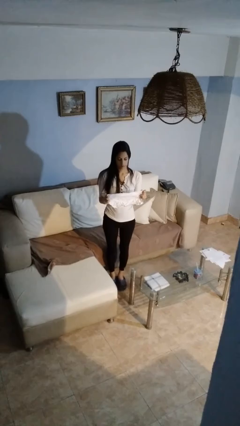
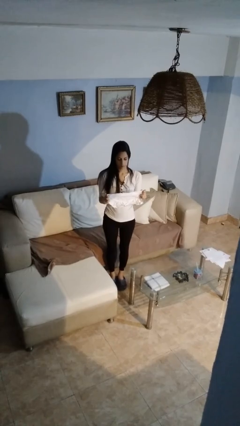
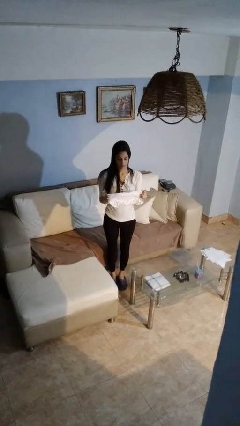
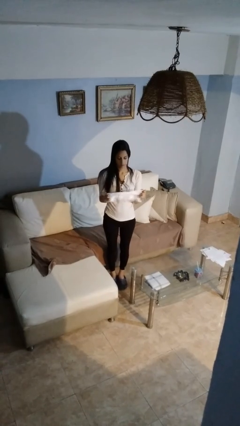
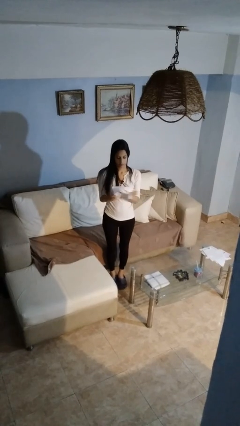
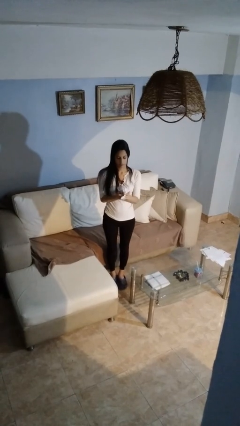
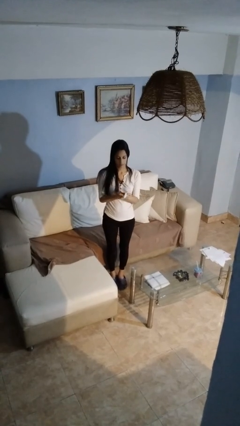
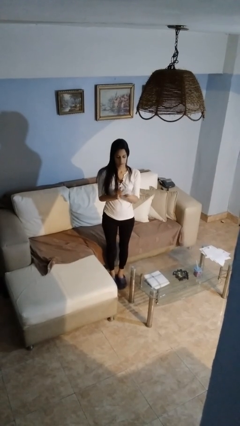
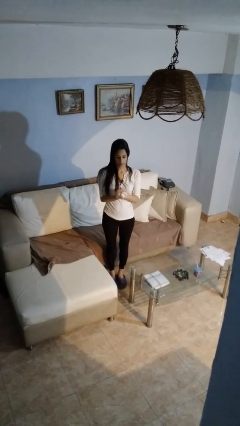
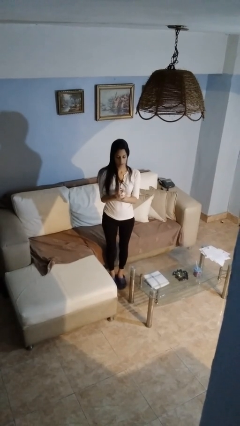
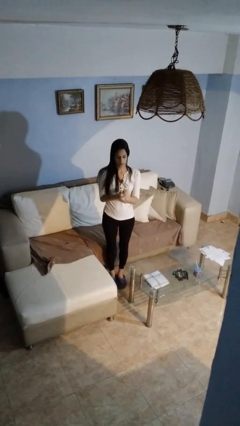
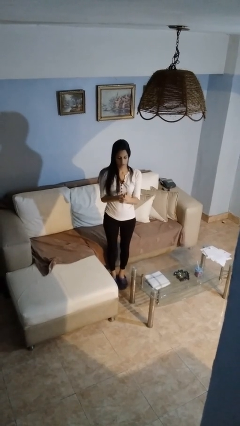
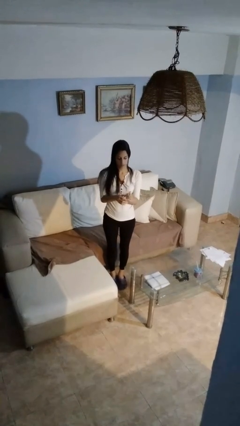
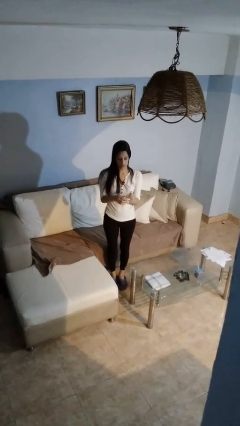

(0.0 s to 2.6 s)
person crumples paper

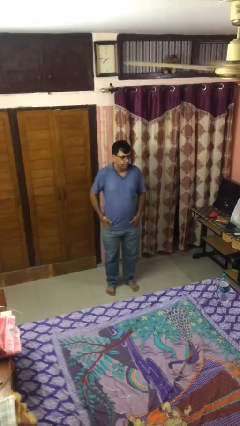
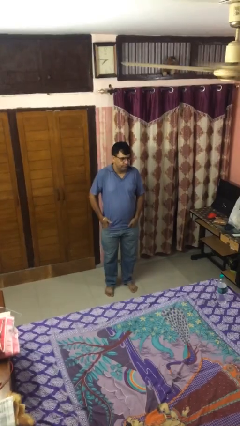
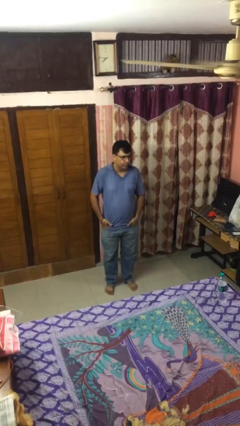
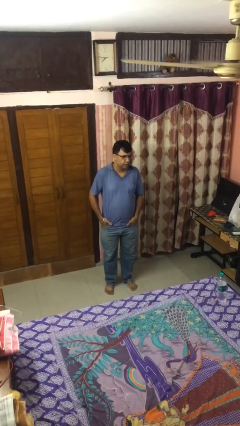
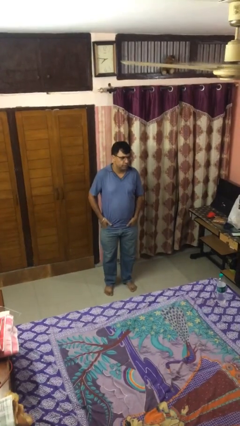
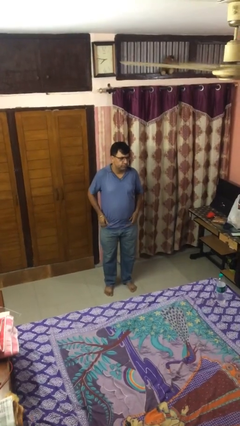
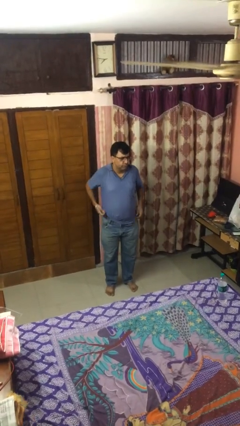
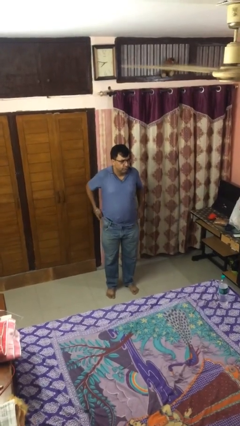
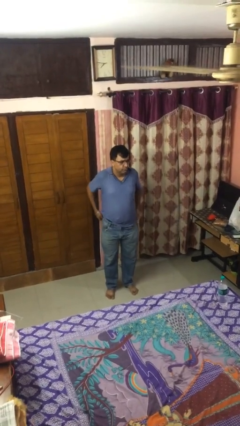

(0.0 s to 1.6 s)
person puts hands in back pockets

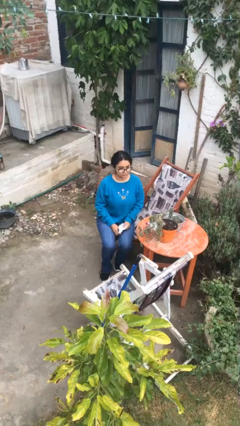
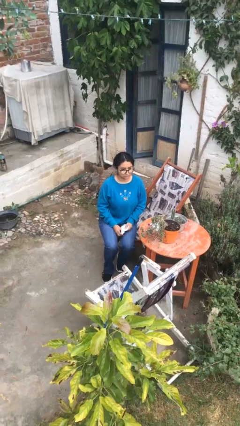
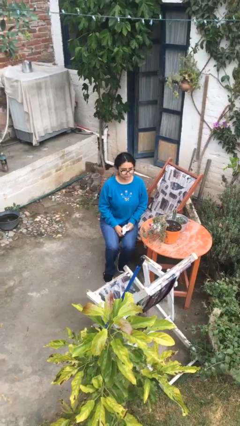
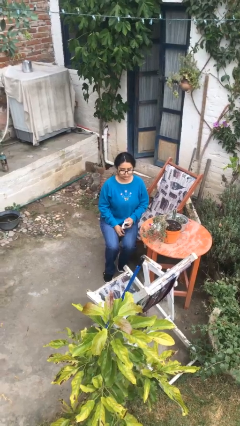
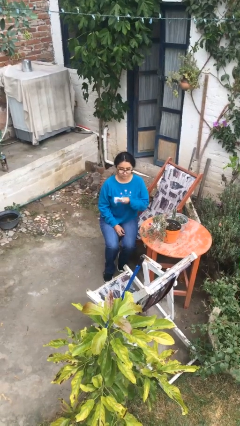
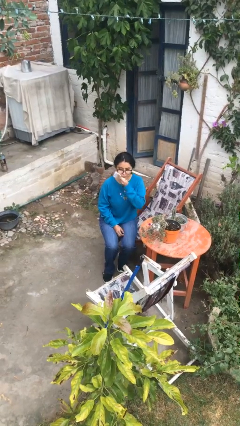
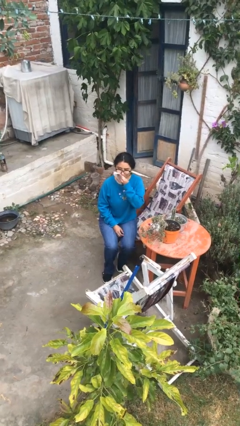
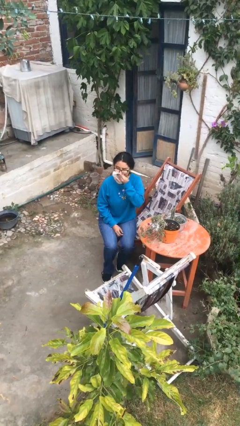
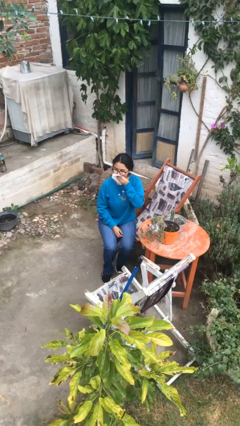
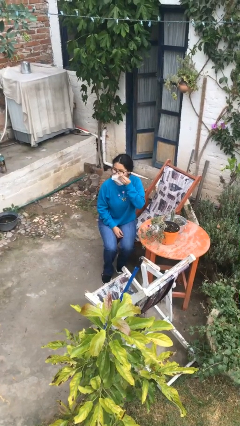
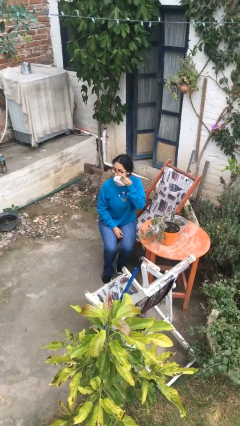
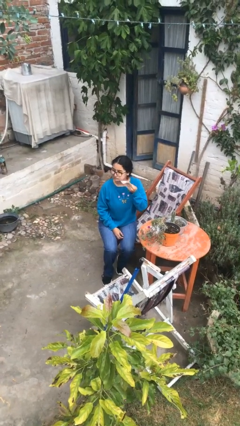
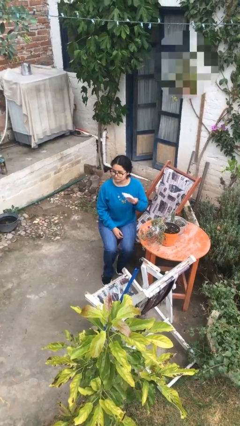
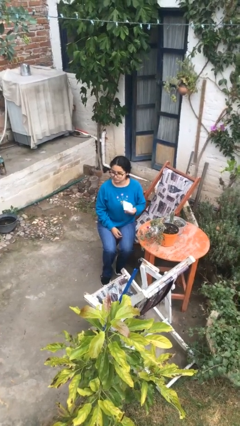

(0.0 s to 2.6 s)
person wipes mouth with napkin

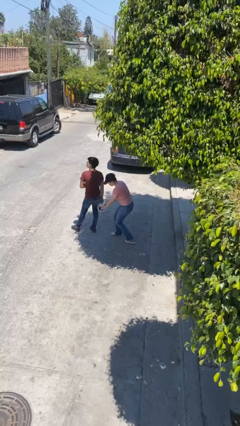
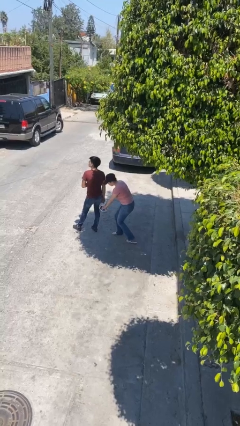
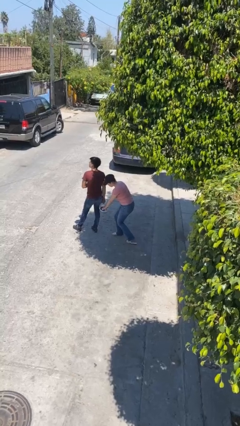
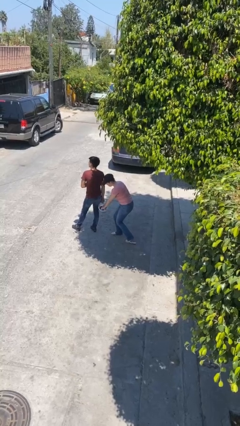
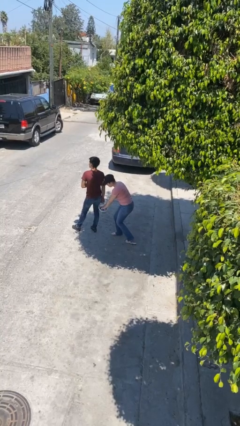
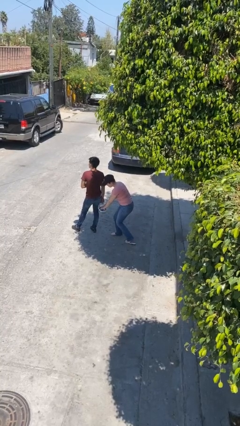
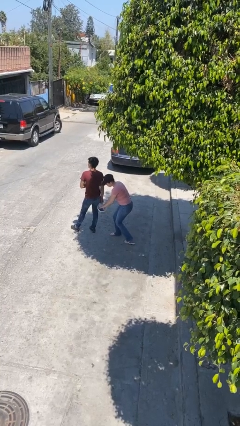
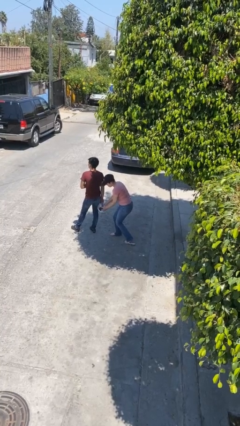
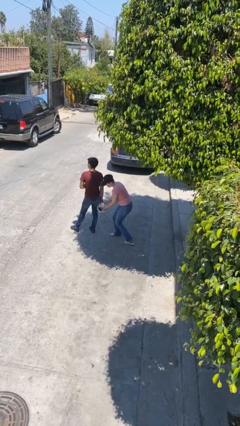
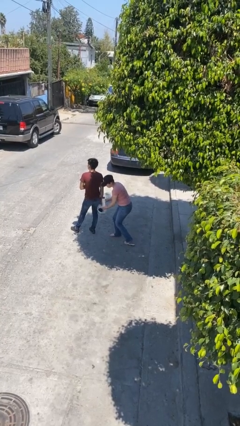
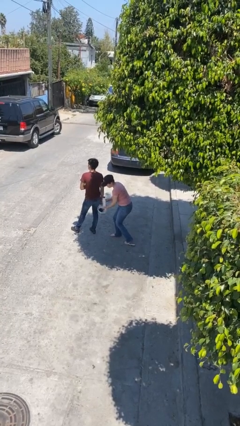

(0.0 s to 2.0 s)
person steals object from person

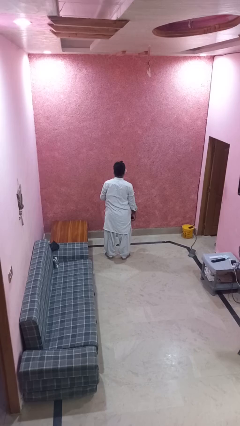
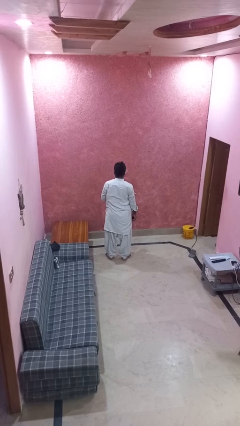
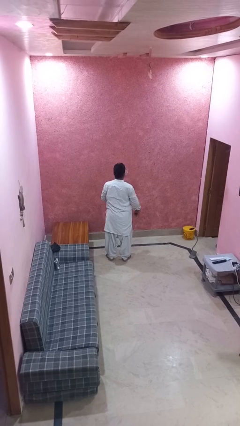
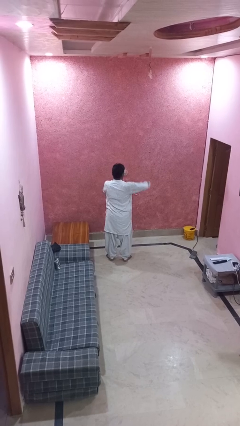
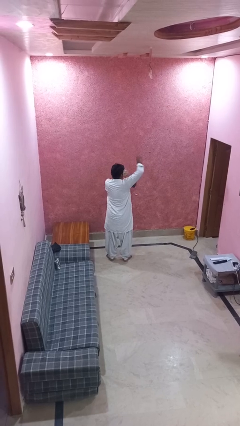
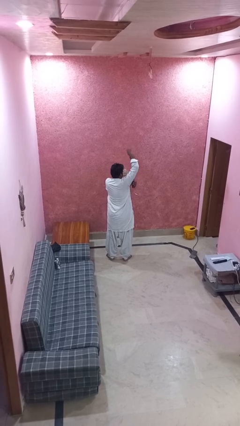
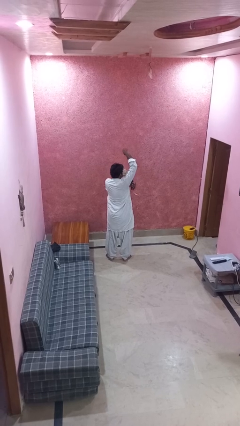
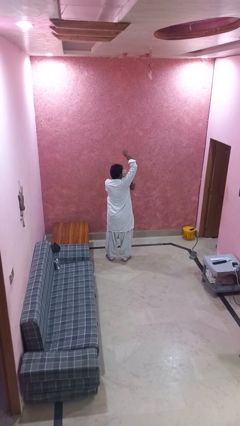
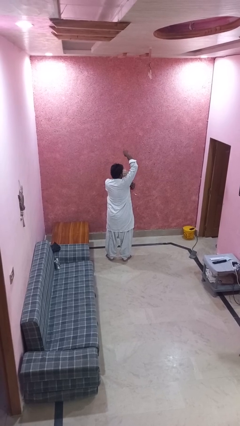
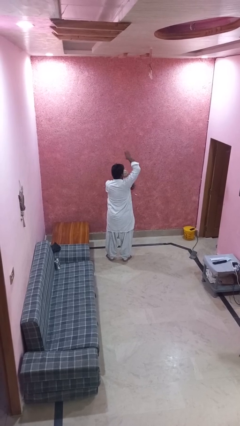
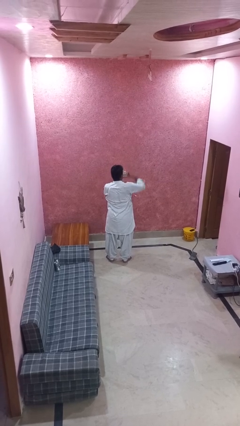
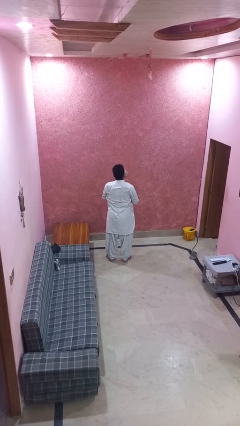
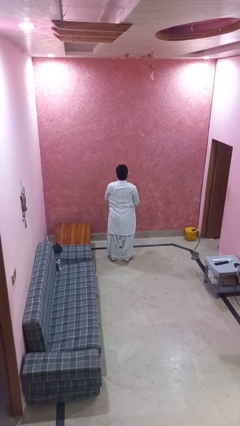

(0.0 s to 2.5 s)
person applies deodorant

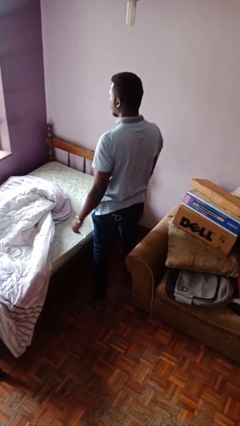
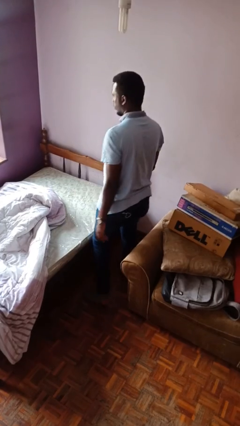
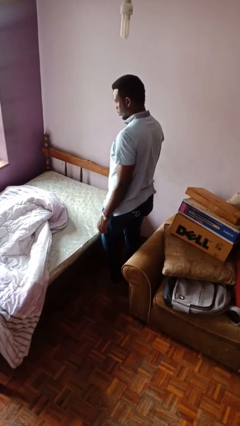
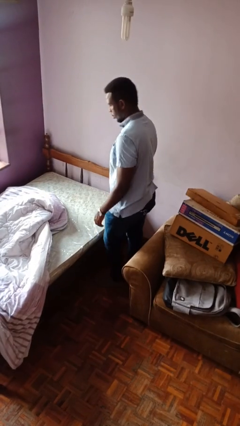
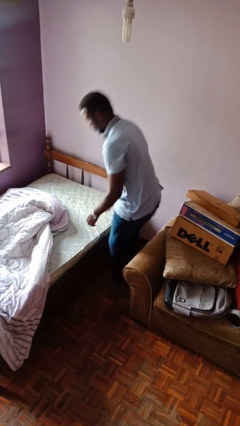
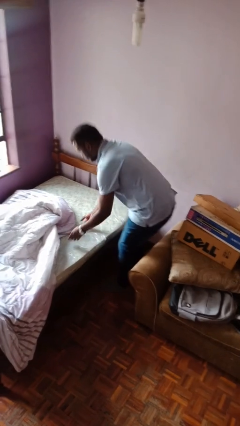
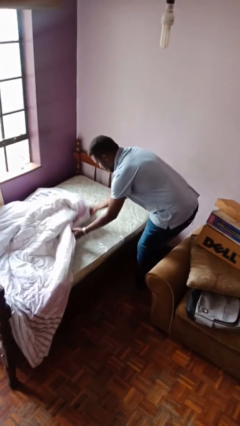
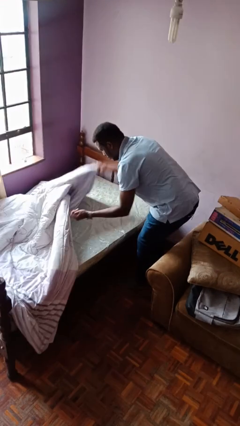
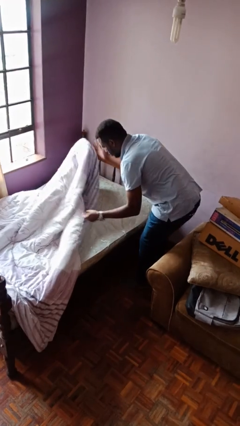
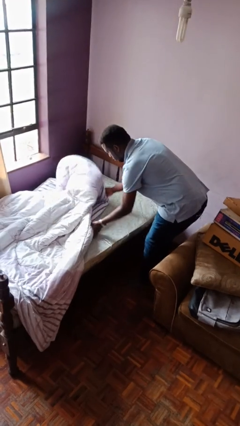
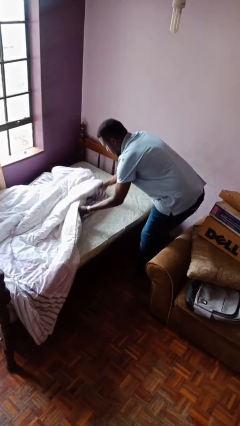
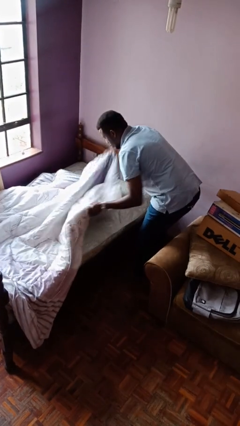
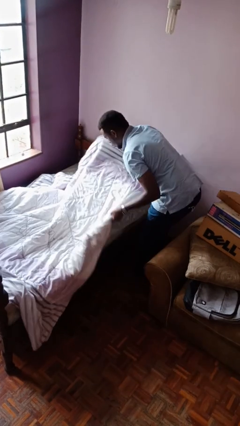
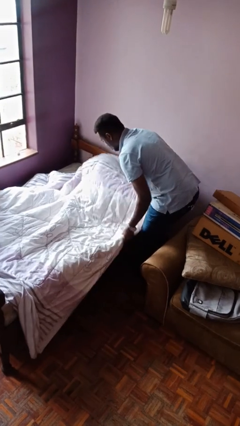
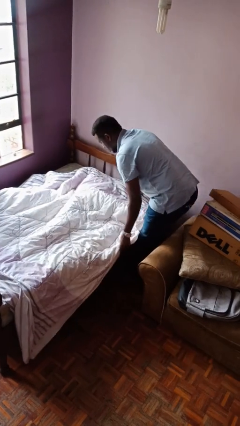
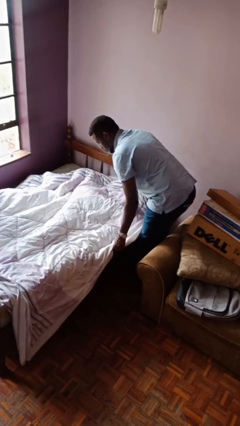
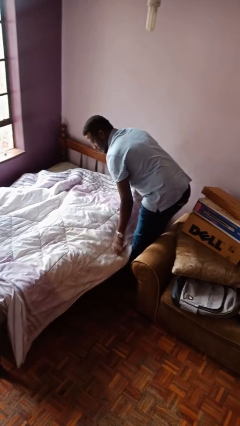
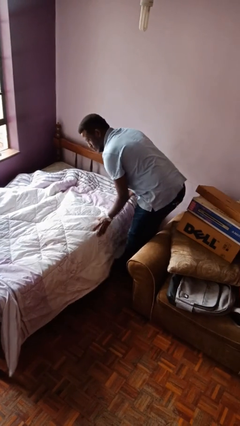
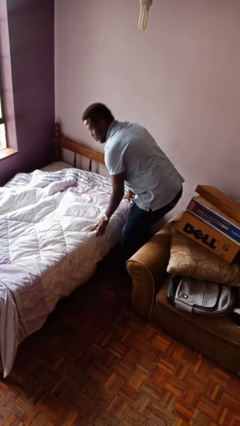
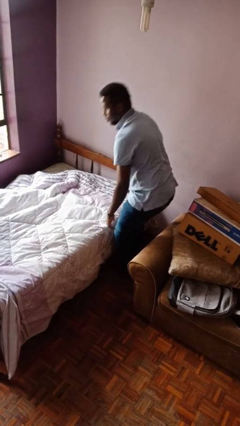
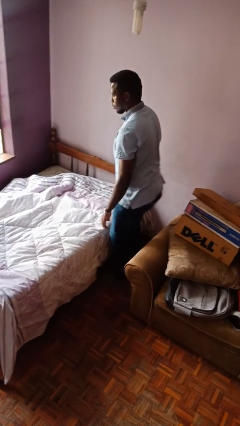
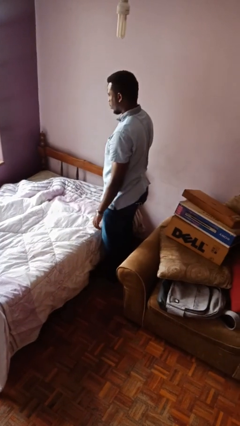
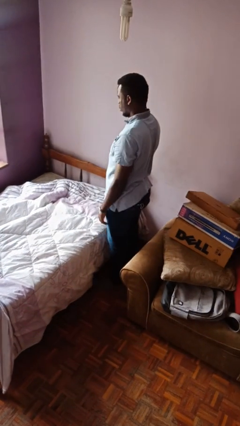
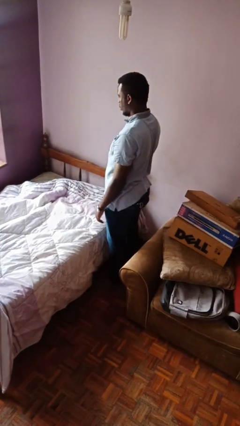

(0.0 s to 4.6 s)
person makes bed

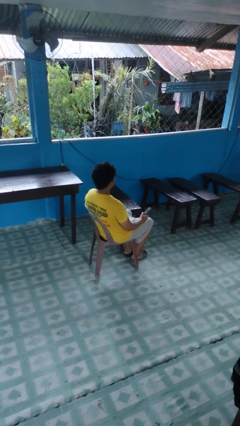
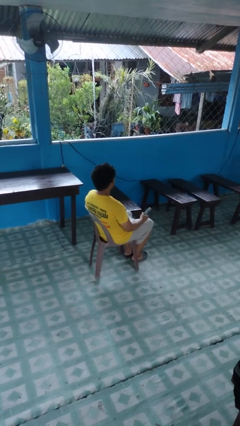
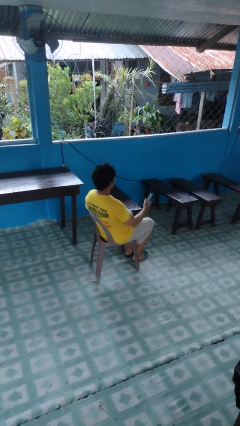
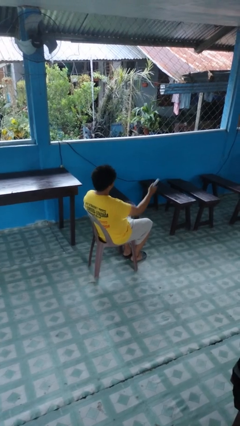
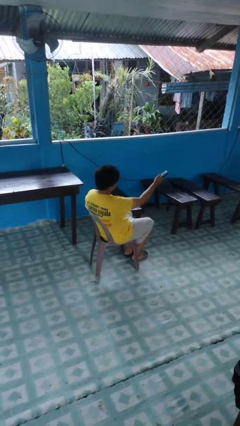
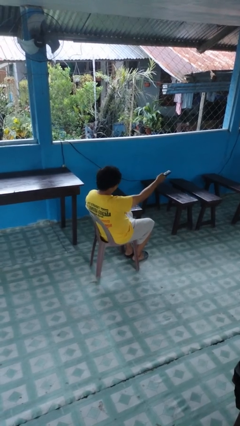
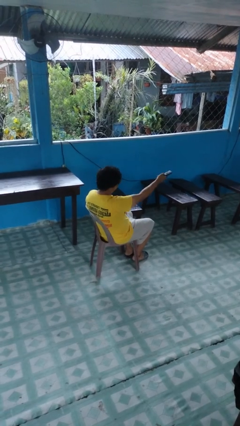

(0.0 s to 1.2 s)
person uses television remote

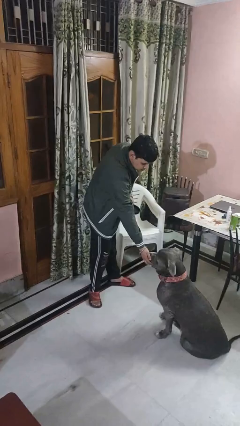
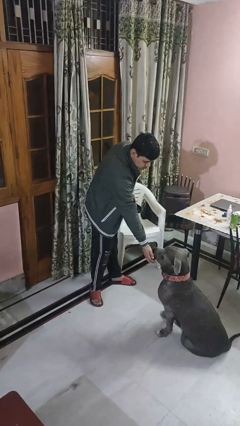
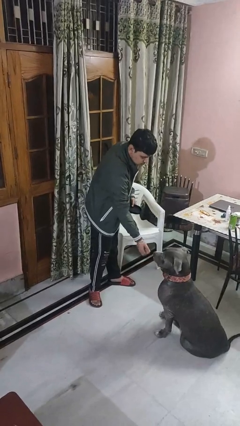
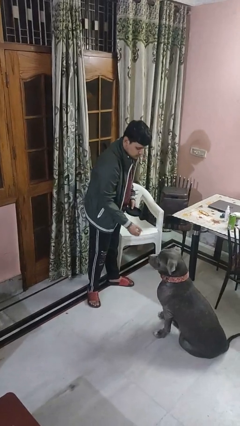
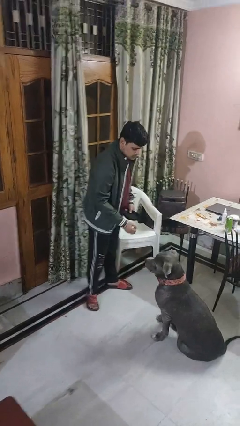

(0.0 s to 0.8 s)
person feeds dog
